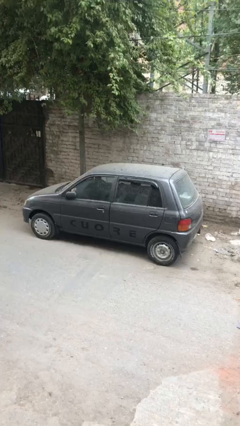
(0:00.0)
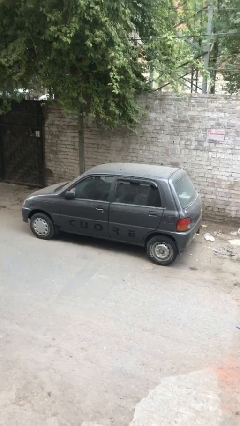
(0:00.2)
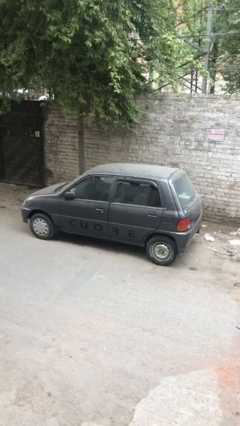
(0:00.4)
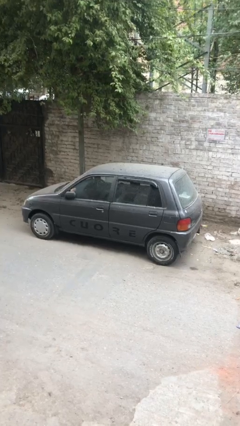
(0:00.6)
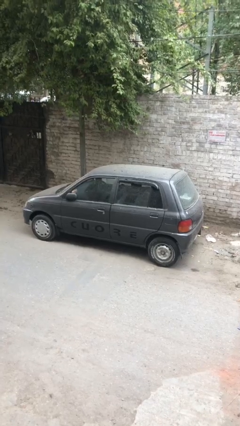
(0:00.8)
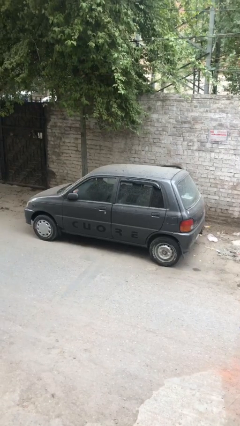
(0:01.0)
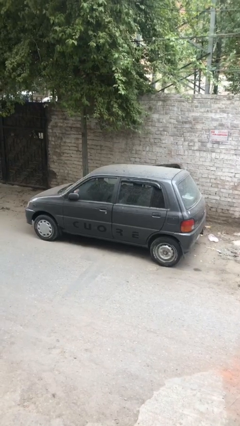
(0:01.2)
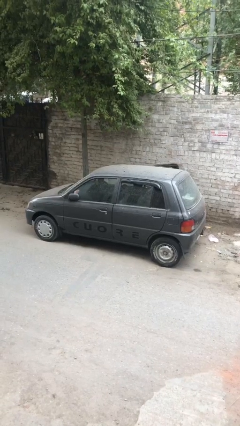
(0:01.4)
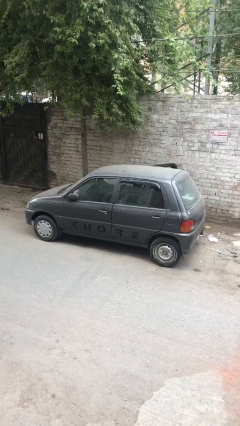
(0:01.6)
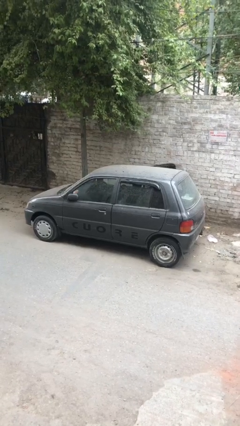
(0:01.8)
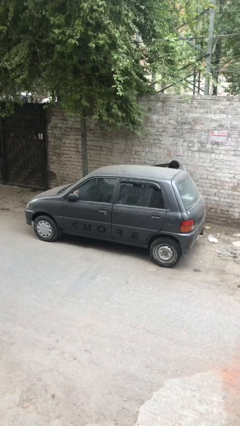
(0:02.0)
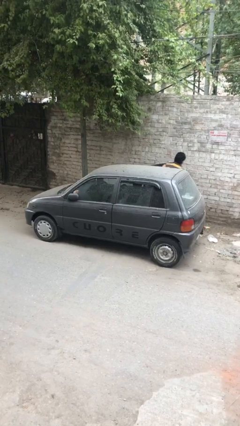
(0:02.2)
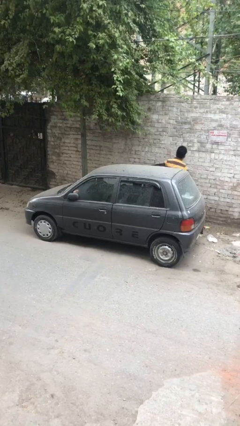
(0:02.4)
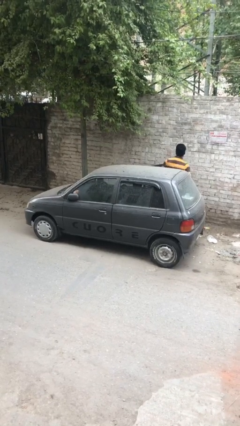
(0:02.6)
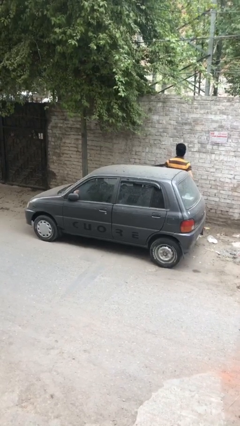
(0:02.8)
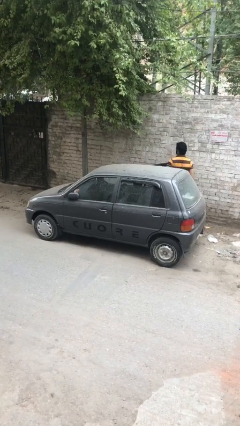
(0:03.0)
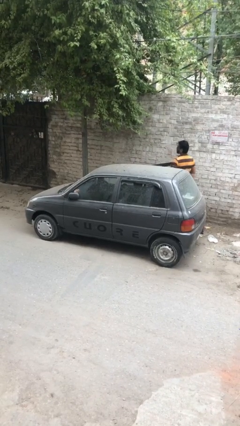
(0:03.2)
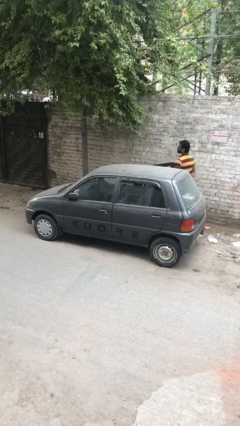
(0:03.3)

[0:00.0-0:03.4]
car drops off person

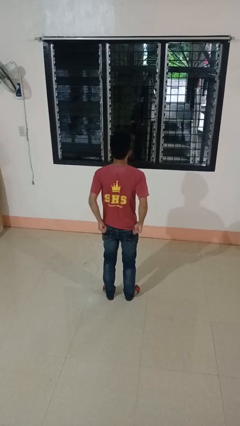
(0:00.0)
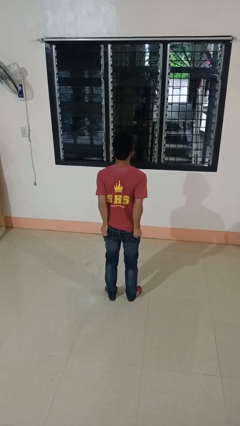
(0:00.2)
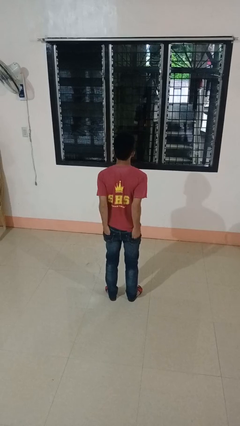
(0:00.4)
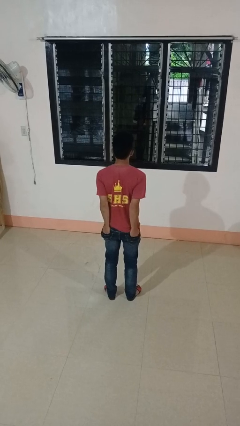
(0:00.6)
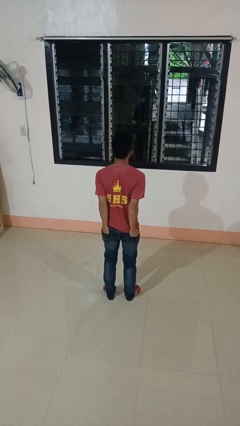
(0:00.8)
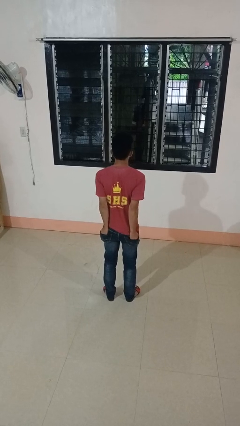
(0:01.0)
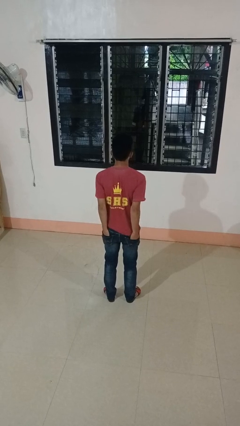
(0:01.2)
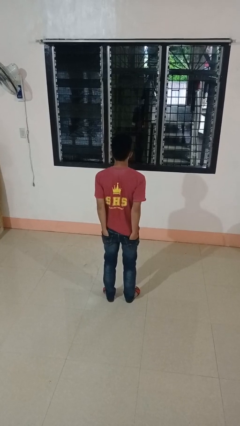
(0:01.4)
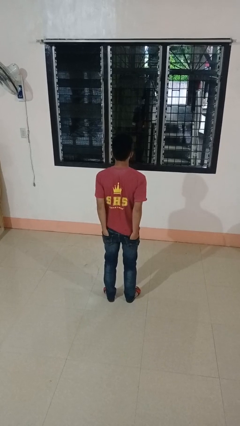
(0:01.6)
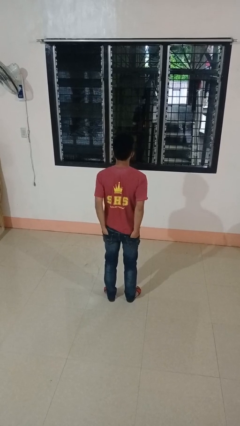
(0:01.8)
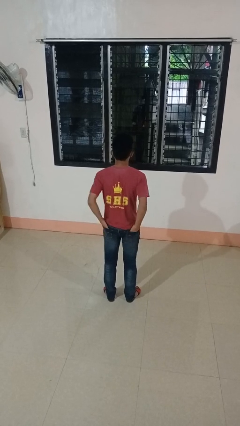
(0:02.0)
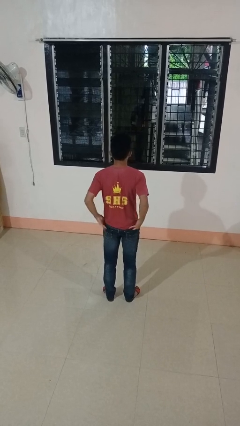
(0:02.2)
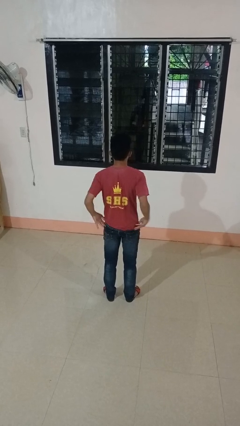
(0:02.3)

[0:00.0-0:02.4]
person puts hands in back pockets

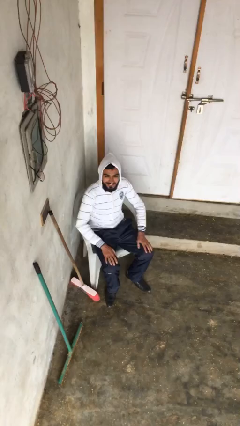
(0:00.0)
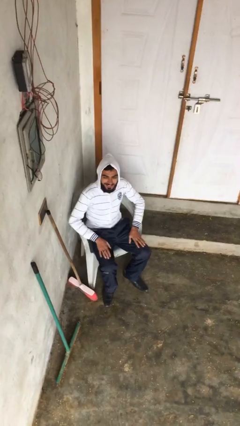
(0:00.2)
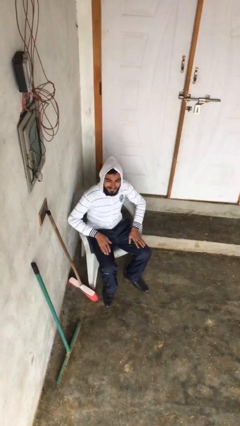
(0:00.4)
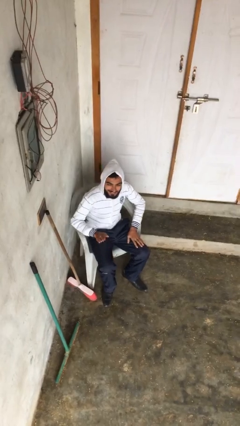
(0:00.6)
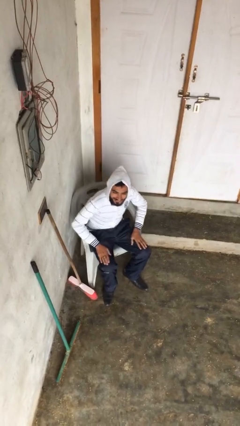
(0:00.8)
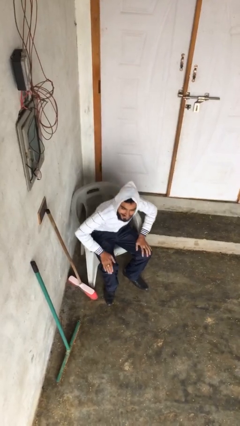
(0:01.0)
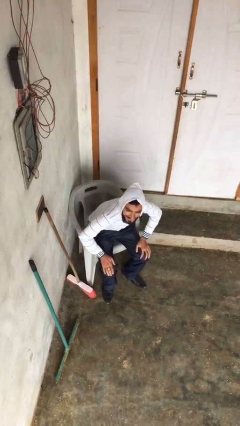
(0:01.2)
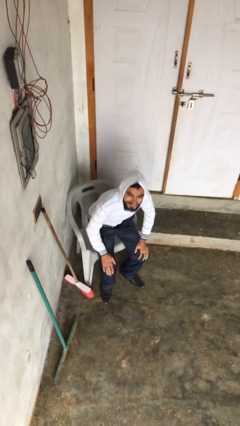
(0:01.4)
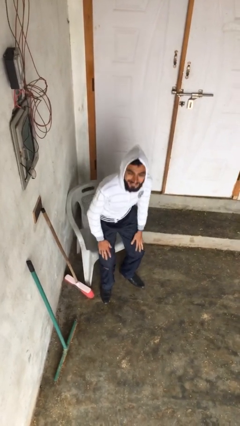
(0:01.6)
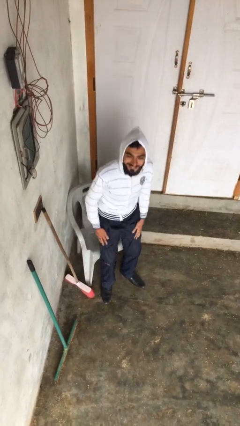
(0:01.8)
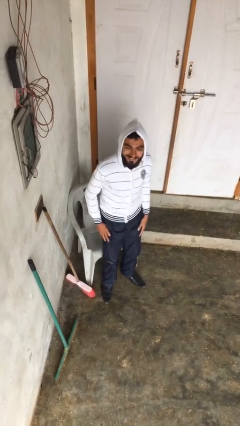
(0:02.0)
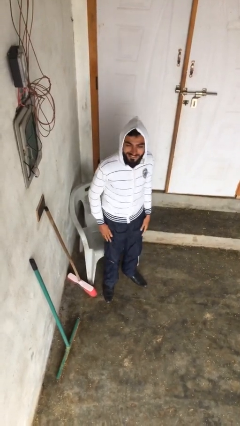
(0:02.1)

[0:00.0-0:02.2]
person stands up

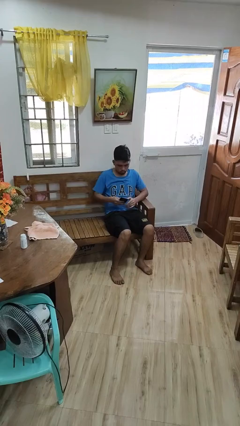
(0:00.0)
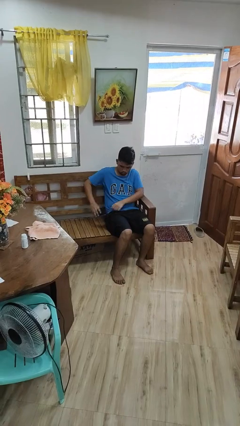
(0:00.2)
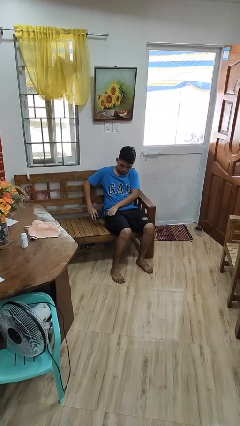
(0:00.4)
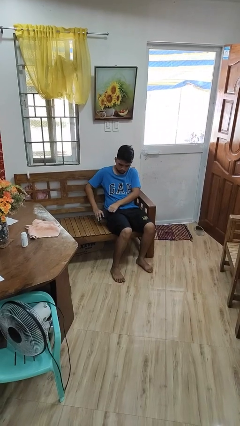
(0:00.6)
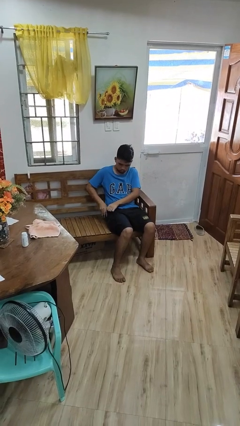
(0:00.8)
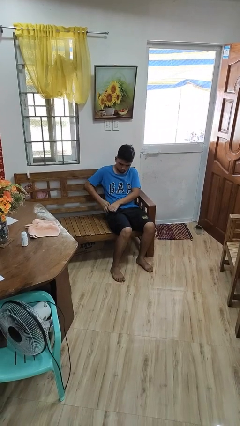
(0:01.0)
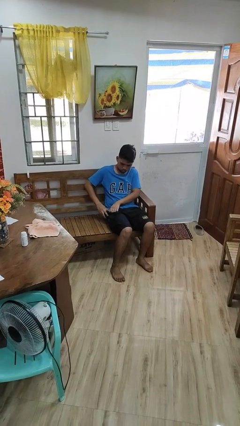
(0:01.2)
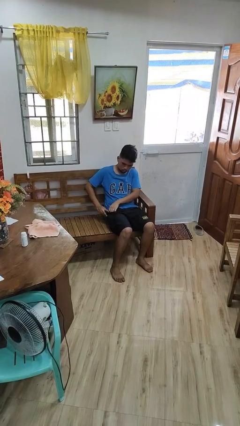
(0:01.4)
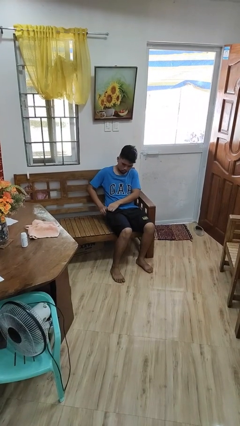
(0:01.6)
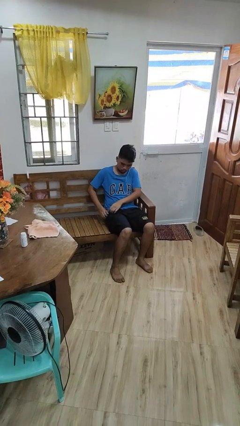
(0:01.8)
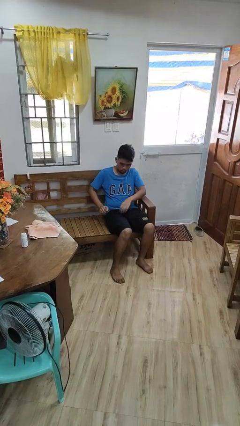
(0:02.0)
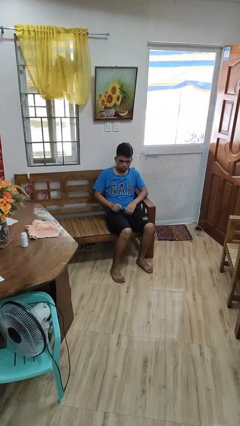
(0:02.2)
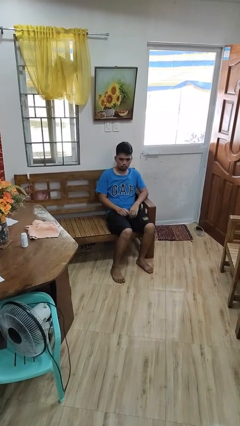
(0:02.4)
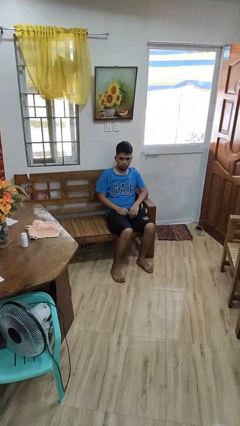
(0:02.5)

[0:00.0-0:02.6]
person puts phone into pocket

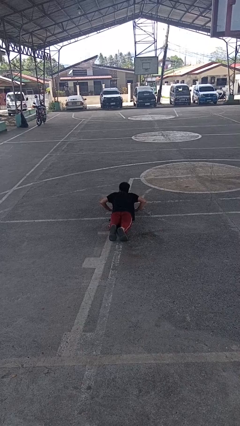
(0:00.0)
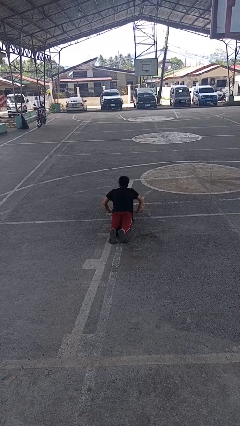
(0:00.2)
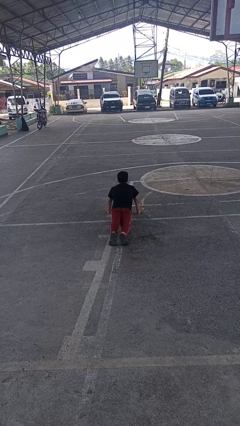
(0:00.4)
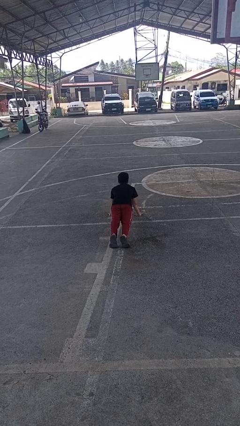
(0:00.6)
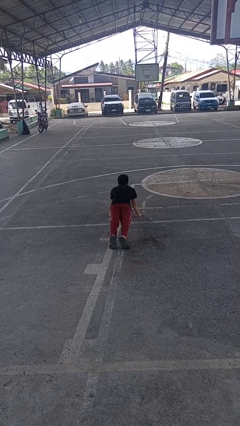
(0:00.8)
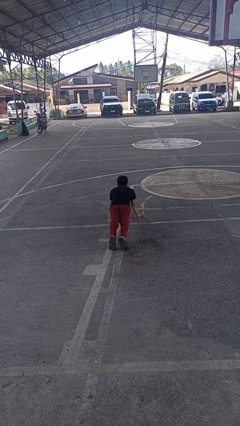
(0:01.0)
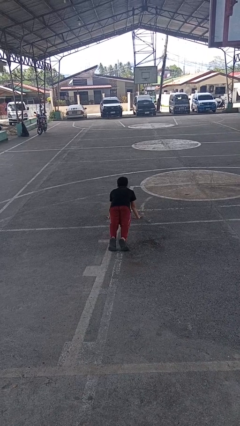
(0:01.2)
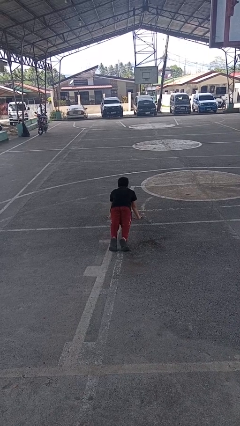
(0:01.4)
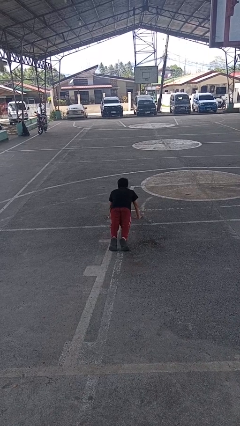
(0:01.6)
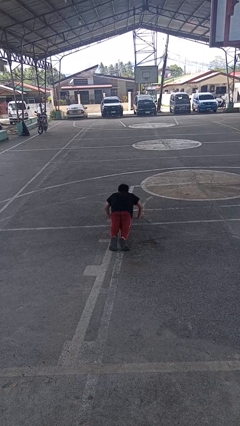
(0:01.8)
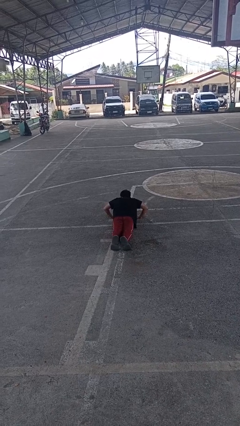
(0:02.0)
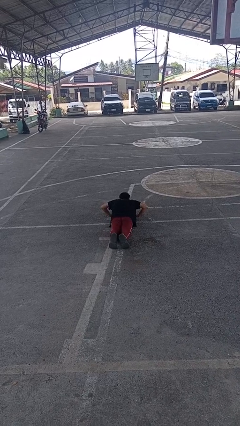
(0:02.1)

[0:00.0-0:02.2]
person exercises with pushup

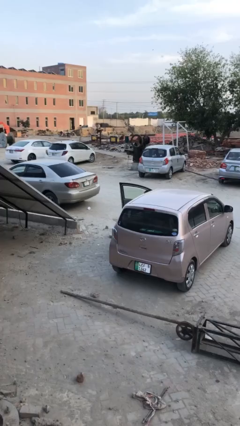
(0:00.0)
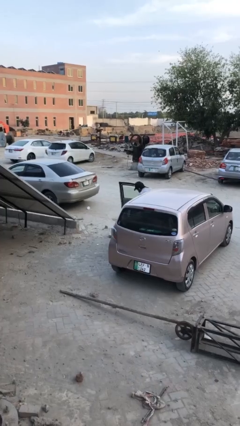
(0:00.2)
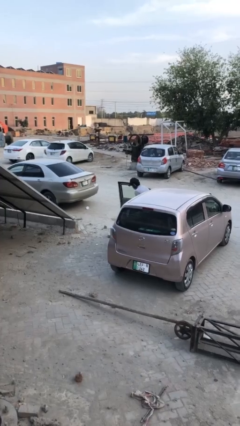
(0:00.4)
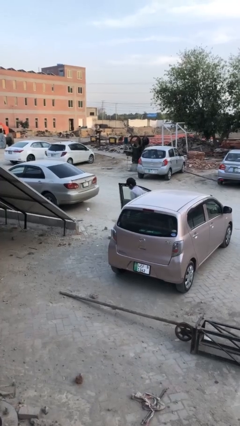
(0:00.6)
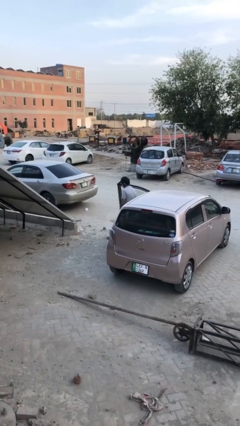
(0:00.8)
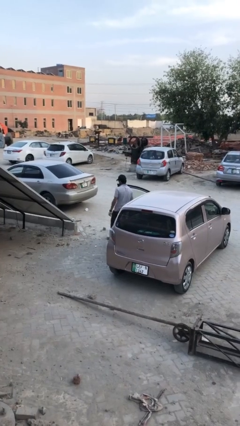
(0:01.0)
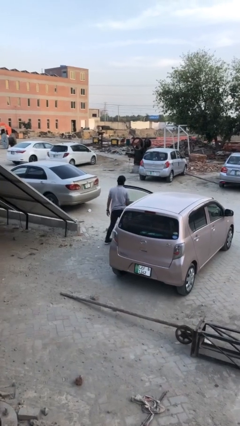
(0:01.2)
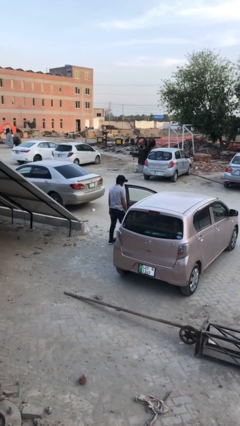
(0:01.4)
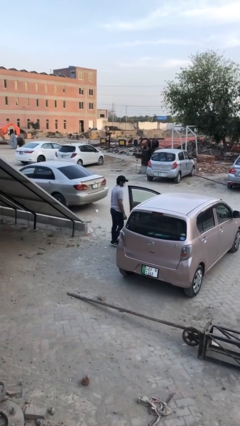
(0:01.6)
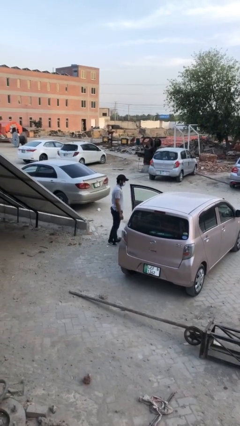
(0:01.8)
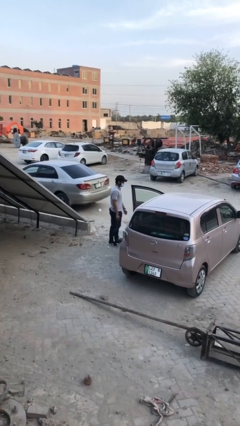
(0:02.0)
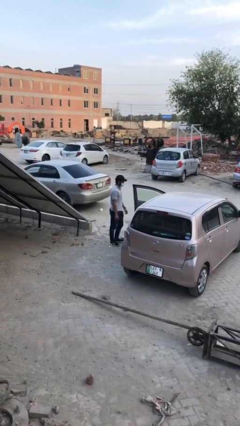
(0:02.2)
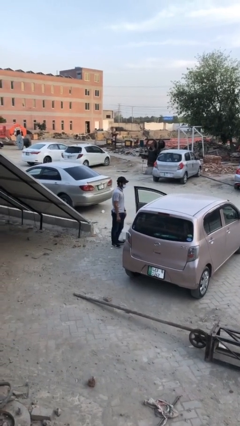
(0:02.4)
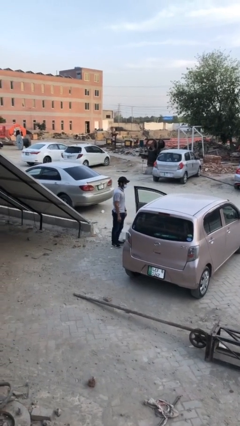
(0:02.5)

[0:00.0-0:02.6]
person exits car

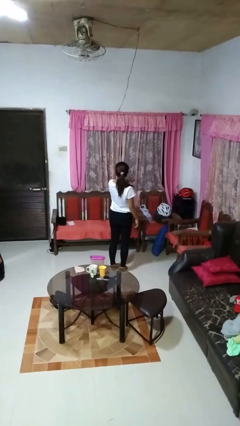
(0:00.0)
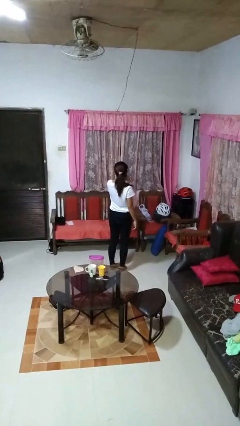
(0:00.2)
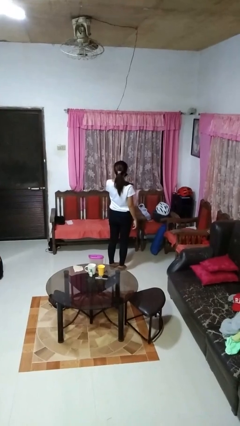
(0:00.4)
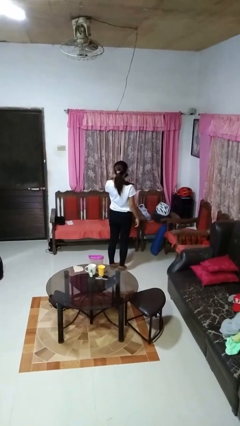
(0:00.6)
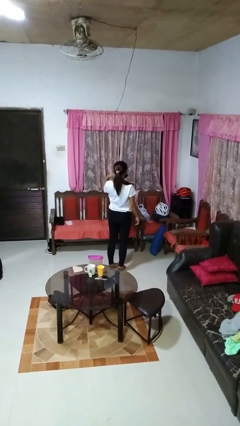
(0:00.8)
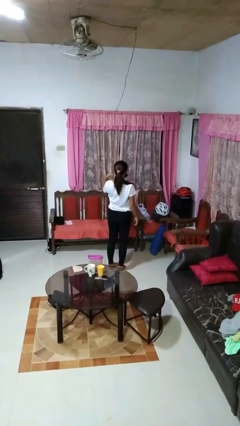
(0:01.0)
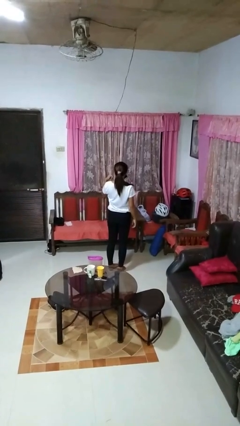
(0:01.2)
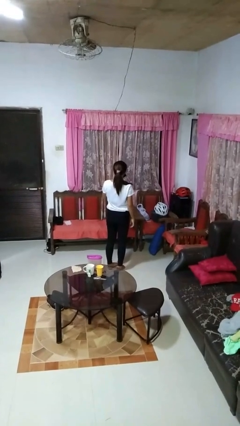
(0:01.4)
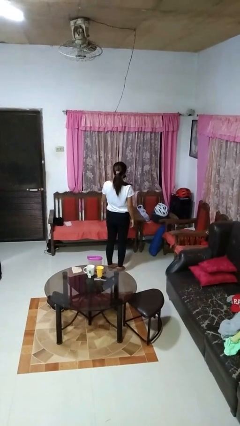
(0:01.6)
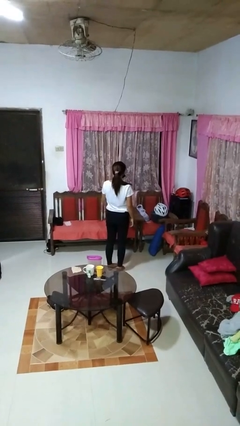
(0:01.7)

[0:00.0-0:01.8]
person gestures cut
